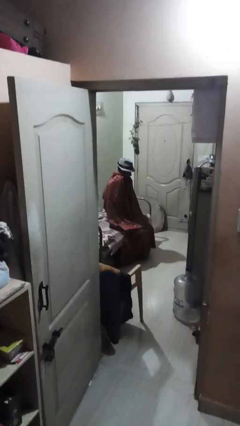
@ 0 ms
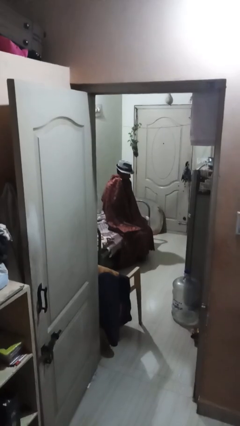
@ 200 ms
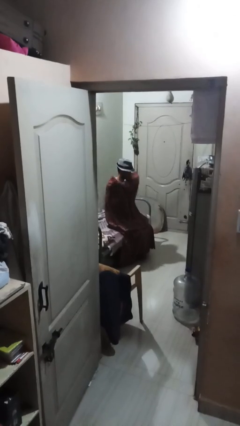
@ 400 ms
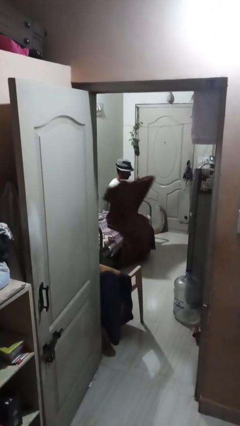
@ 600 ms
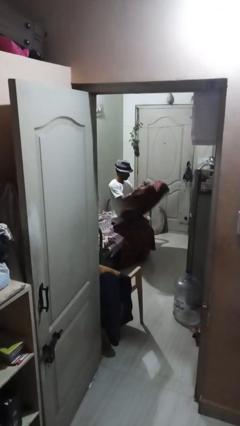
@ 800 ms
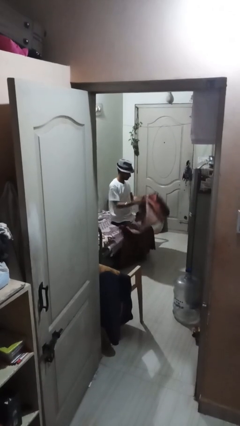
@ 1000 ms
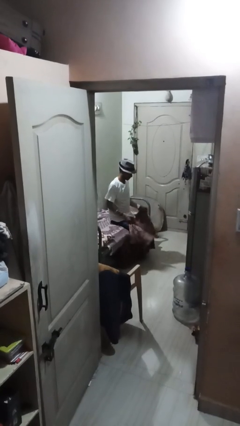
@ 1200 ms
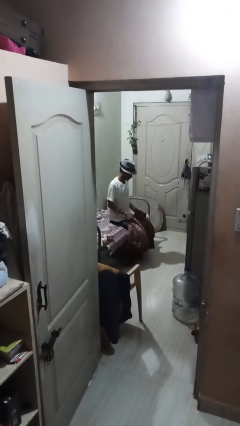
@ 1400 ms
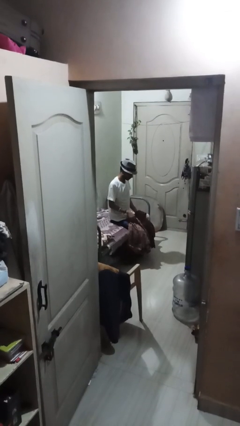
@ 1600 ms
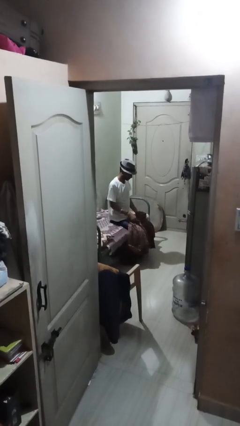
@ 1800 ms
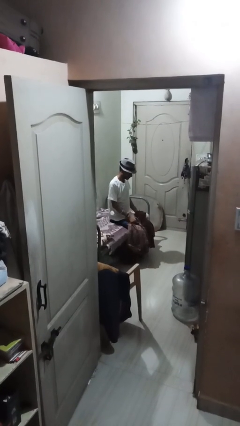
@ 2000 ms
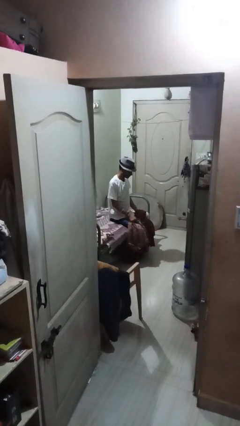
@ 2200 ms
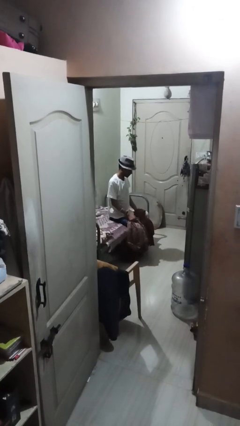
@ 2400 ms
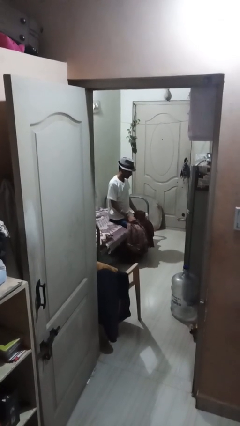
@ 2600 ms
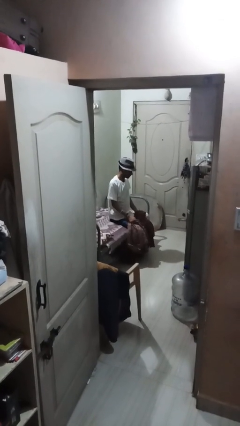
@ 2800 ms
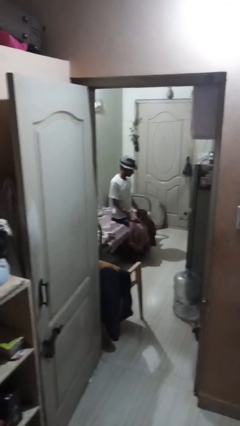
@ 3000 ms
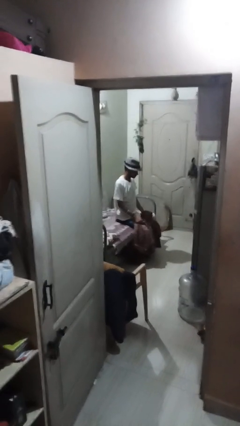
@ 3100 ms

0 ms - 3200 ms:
person uncovers with blanket

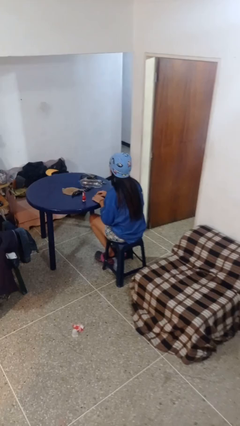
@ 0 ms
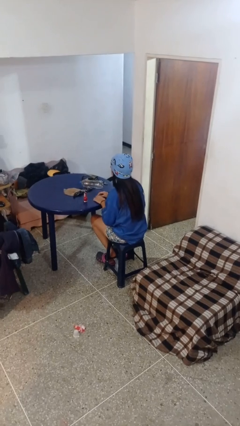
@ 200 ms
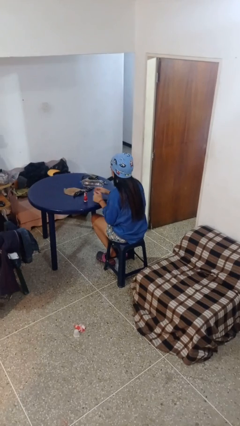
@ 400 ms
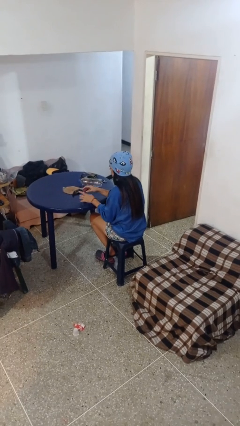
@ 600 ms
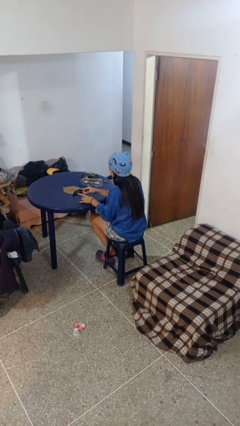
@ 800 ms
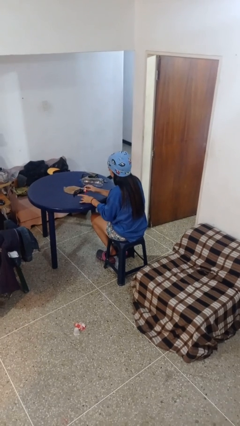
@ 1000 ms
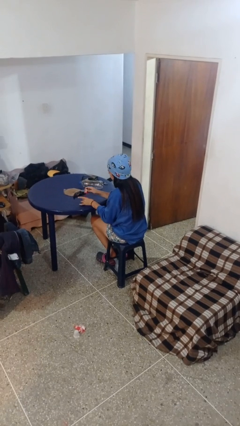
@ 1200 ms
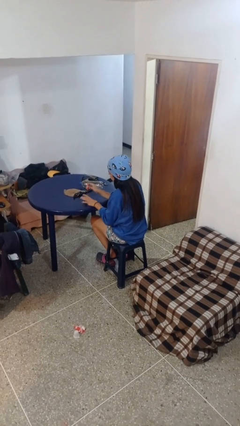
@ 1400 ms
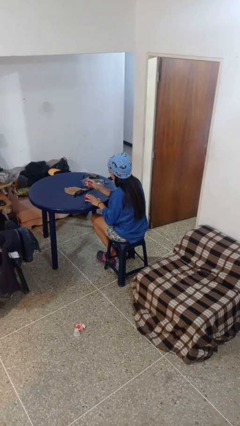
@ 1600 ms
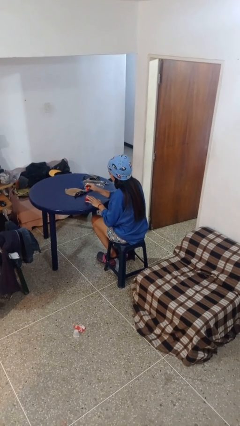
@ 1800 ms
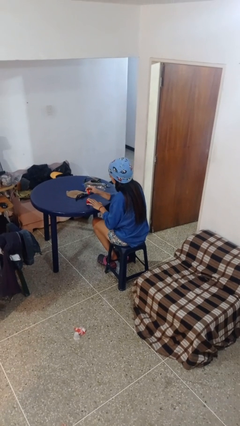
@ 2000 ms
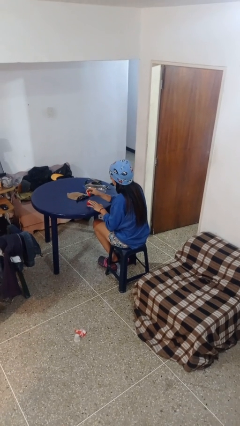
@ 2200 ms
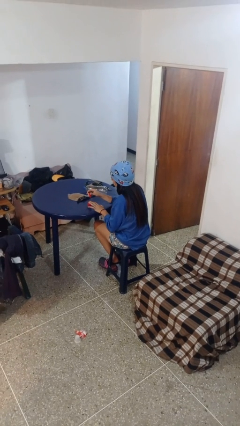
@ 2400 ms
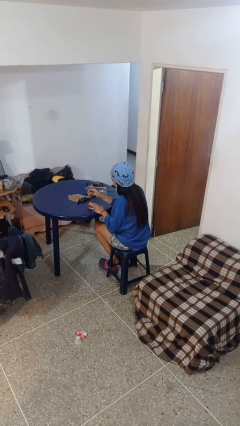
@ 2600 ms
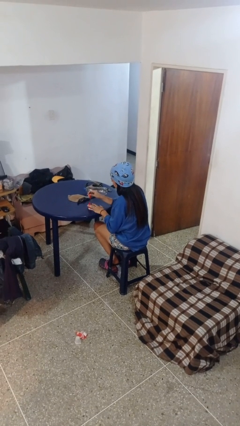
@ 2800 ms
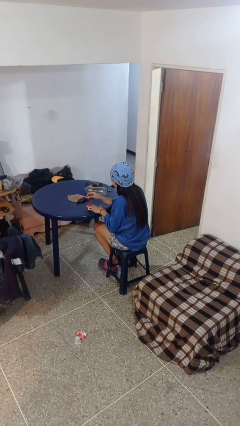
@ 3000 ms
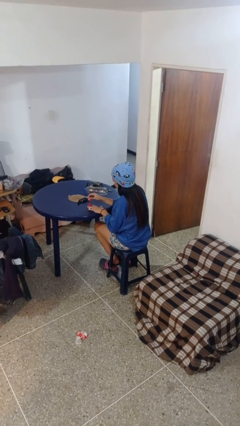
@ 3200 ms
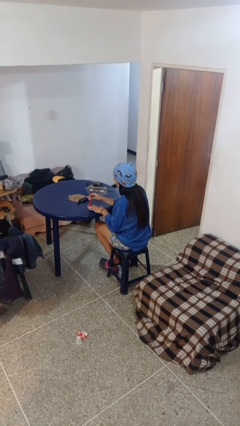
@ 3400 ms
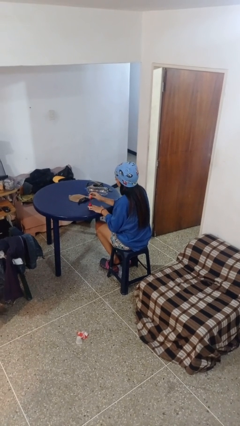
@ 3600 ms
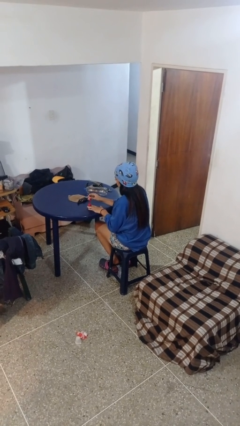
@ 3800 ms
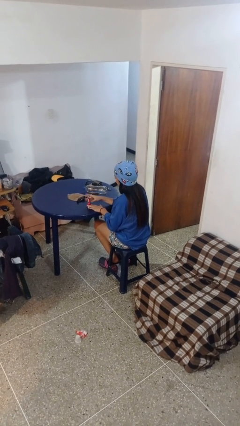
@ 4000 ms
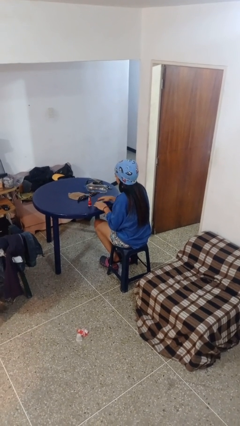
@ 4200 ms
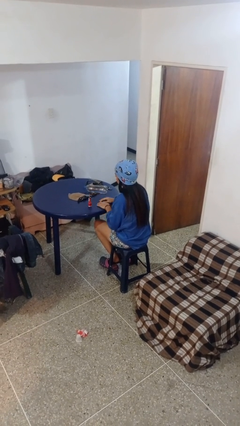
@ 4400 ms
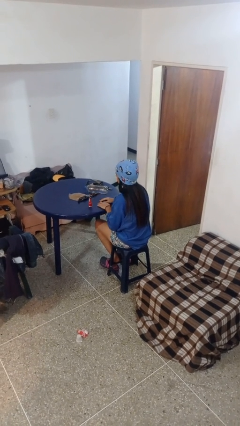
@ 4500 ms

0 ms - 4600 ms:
person paints fingernails

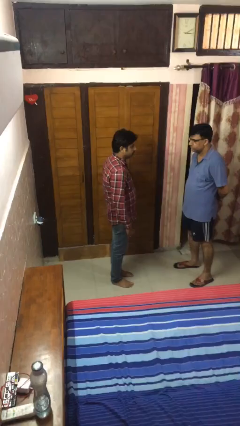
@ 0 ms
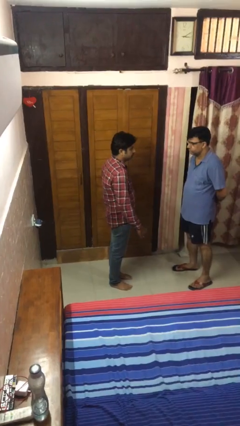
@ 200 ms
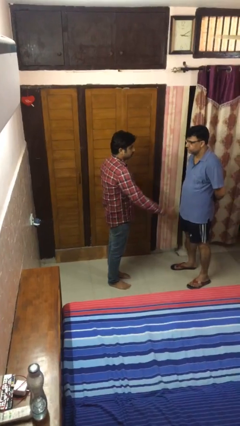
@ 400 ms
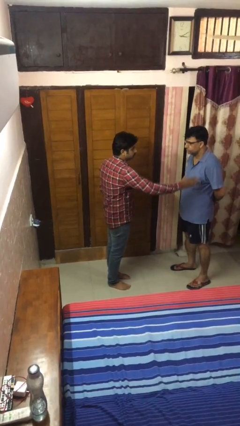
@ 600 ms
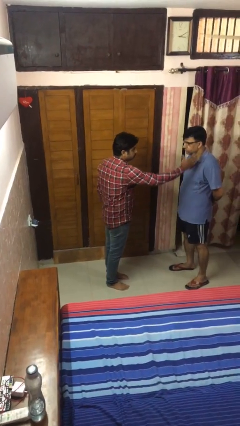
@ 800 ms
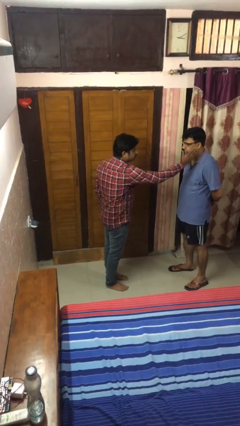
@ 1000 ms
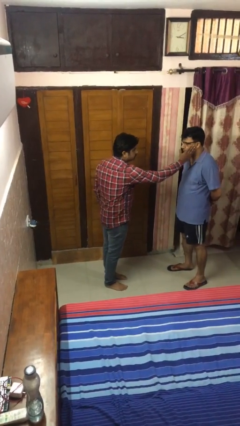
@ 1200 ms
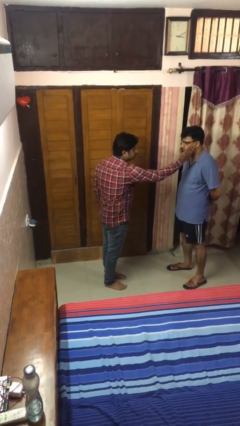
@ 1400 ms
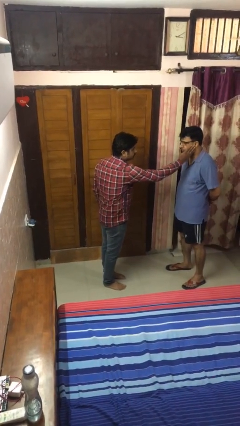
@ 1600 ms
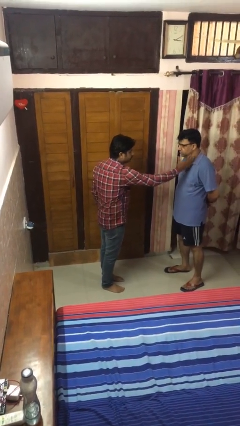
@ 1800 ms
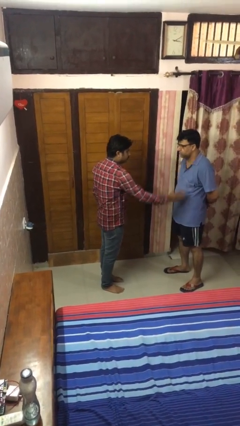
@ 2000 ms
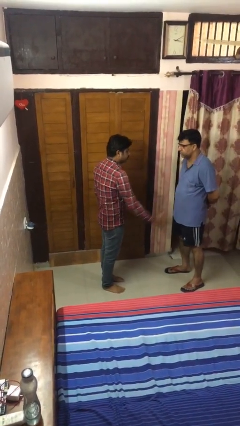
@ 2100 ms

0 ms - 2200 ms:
person touches face of person

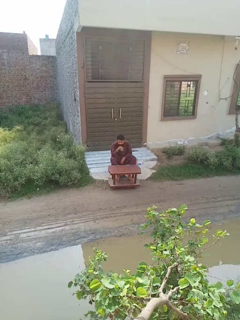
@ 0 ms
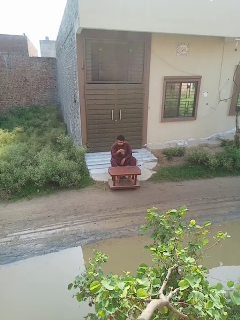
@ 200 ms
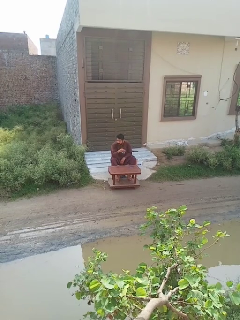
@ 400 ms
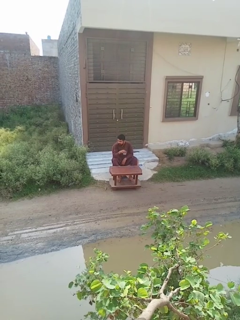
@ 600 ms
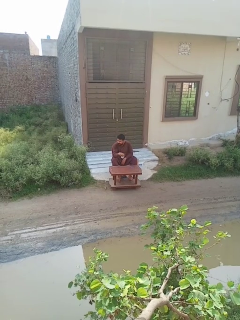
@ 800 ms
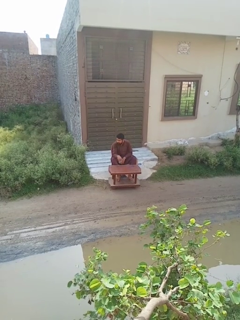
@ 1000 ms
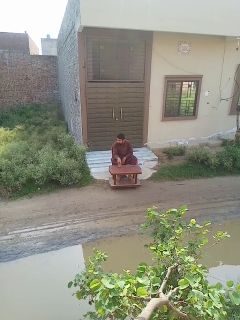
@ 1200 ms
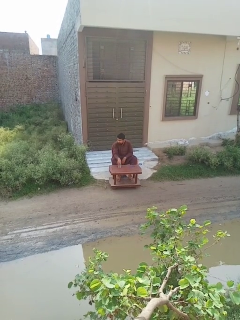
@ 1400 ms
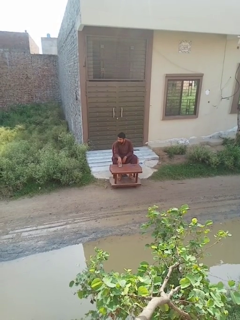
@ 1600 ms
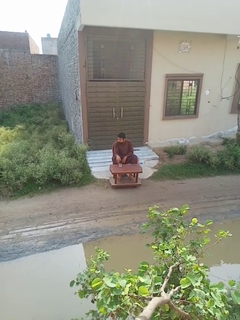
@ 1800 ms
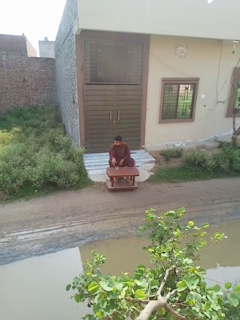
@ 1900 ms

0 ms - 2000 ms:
person puts down object on table

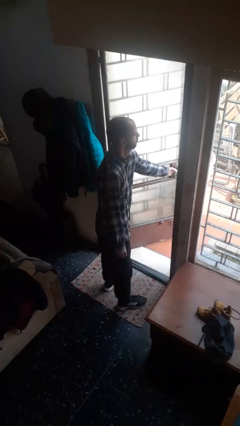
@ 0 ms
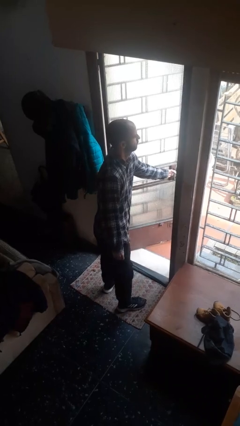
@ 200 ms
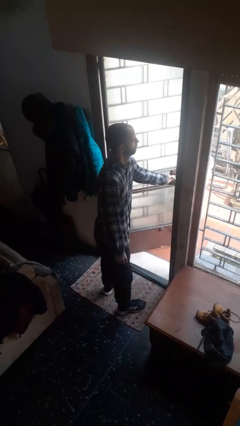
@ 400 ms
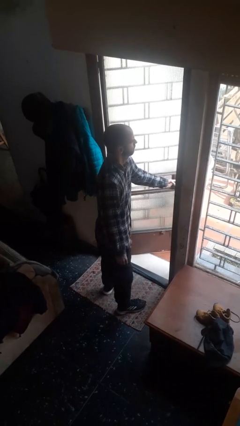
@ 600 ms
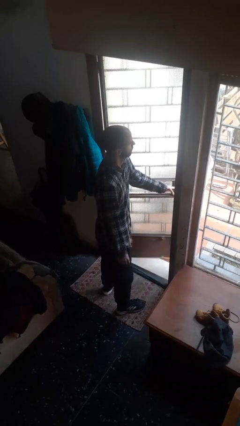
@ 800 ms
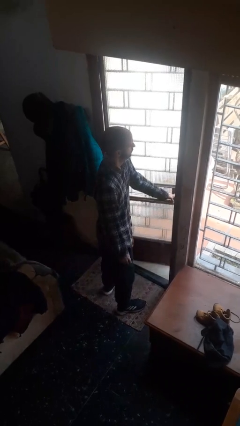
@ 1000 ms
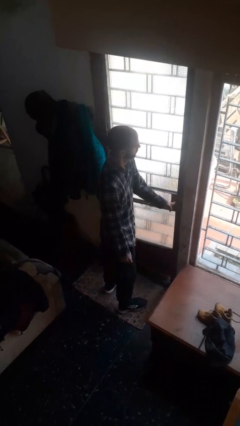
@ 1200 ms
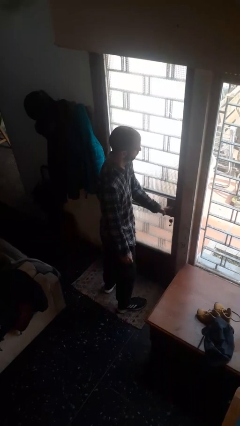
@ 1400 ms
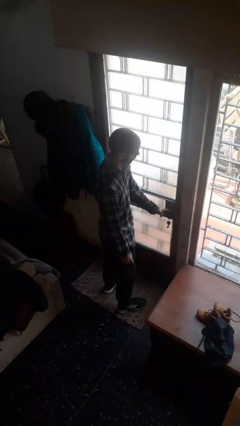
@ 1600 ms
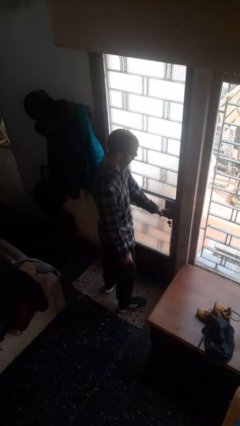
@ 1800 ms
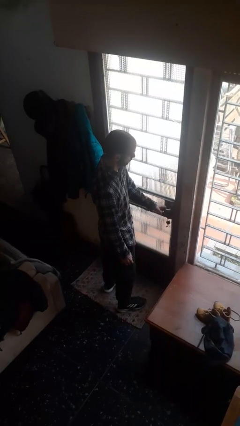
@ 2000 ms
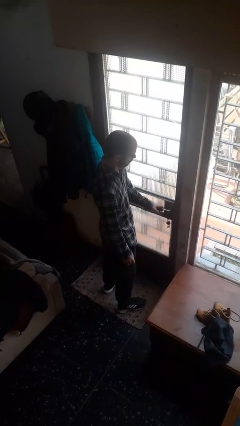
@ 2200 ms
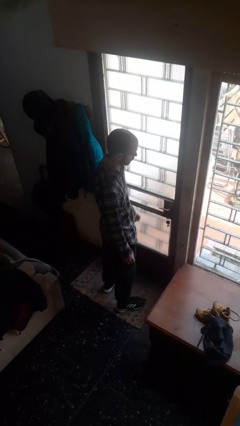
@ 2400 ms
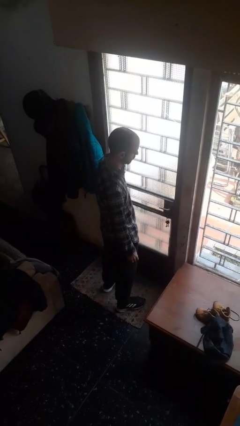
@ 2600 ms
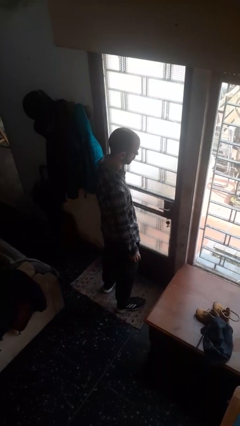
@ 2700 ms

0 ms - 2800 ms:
person closes facility door

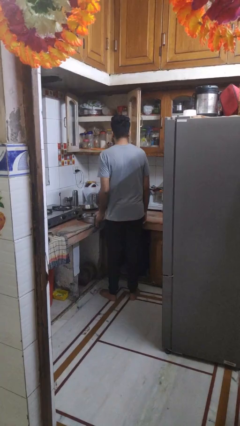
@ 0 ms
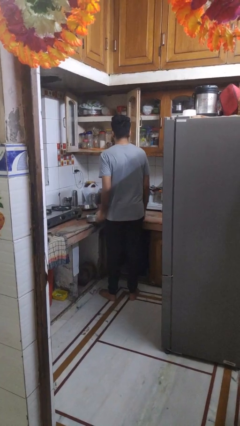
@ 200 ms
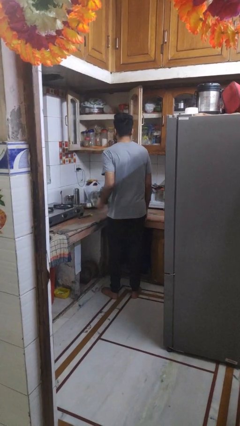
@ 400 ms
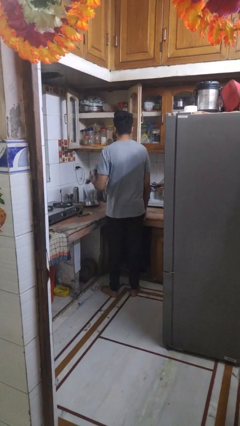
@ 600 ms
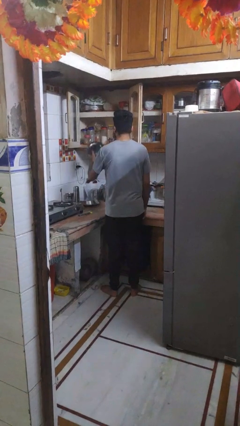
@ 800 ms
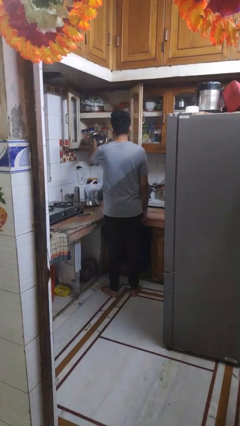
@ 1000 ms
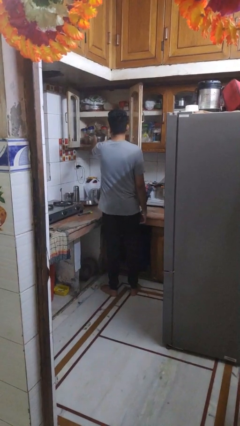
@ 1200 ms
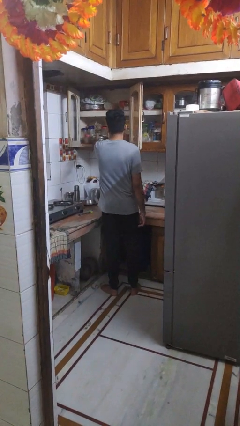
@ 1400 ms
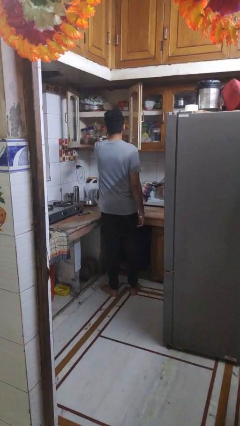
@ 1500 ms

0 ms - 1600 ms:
person puts object in cabinet

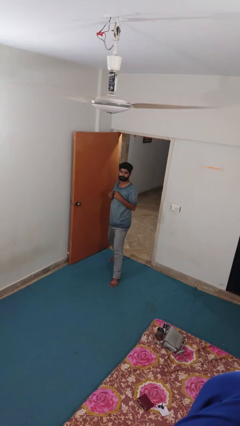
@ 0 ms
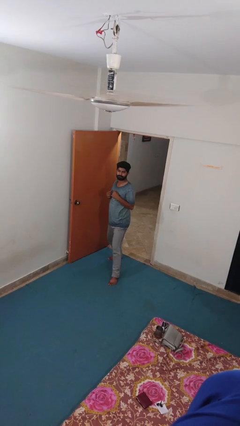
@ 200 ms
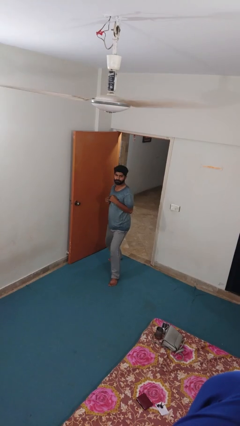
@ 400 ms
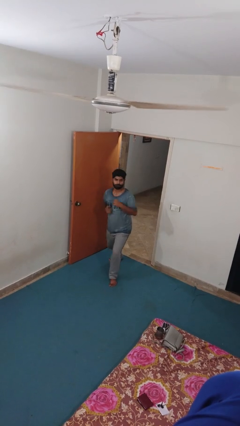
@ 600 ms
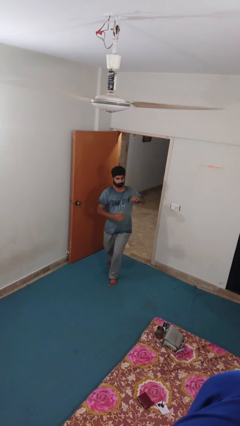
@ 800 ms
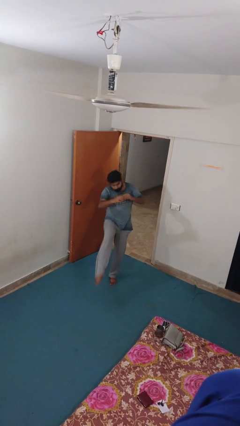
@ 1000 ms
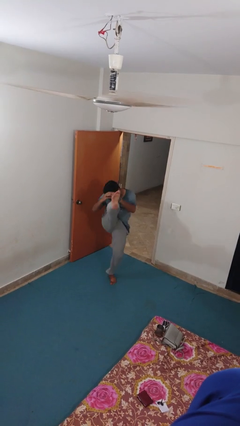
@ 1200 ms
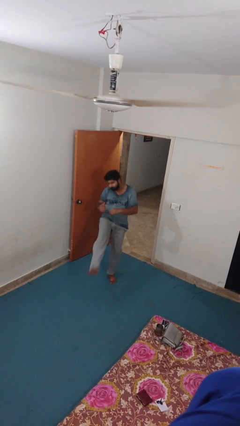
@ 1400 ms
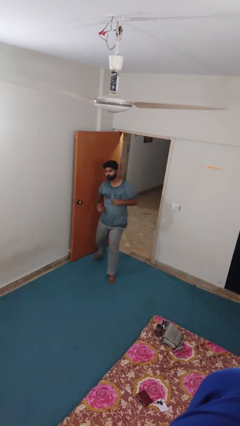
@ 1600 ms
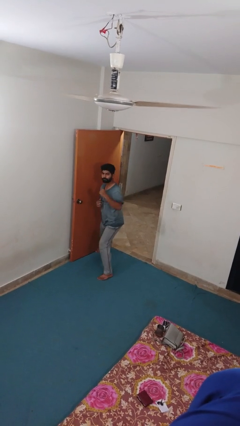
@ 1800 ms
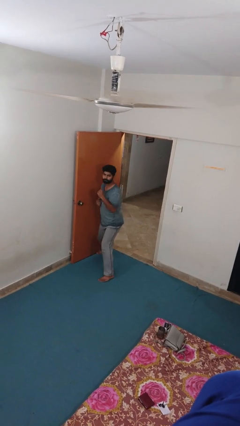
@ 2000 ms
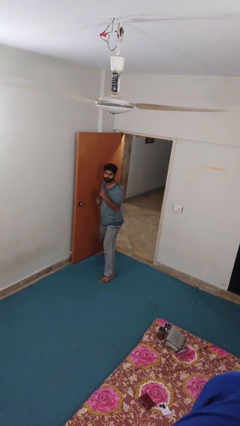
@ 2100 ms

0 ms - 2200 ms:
person karate kicks
